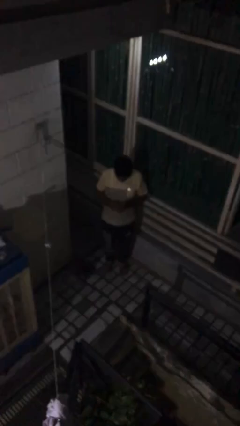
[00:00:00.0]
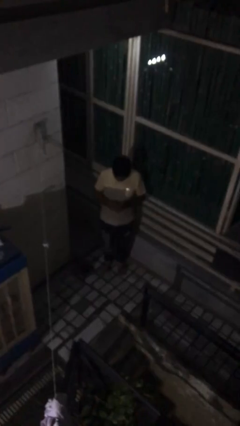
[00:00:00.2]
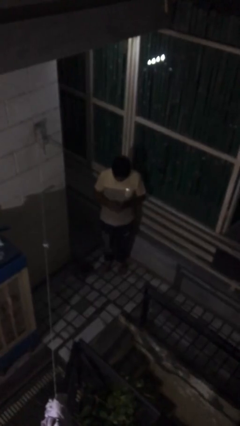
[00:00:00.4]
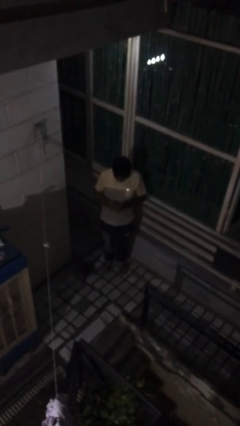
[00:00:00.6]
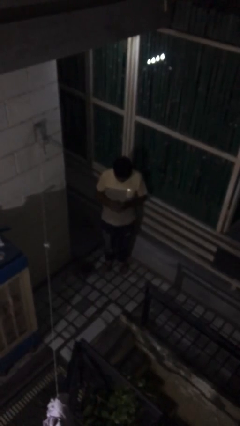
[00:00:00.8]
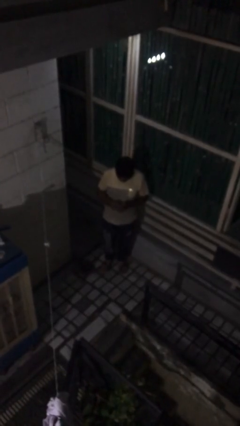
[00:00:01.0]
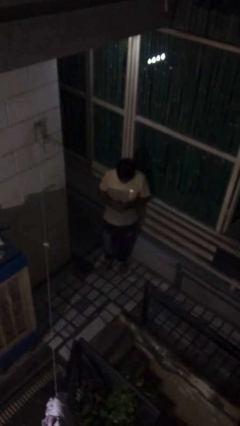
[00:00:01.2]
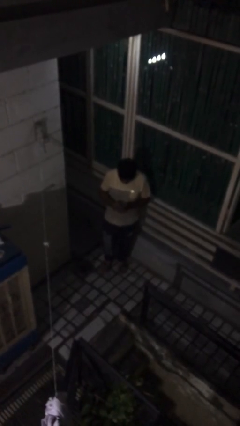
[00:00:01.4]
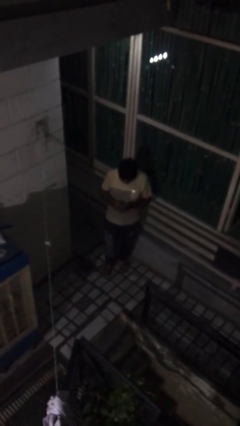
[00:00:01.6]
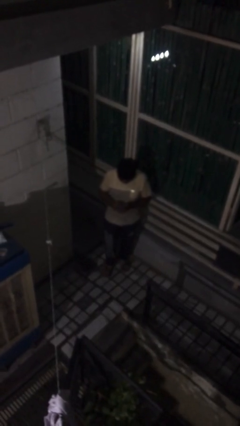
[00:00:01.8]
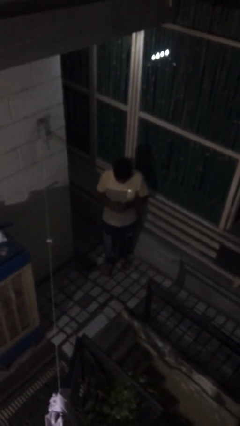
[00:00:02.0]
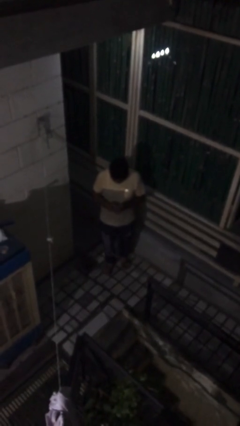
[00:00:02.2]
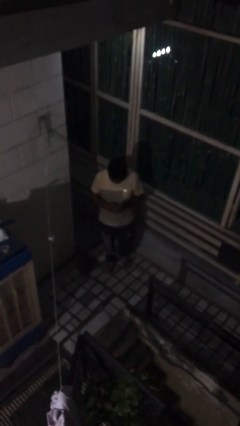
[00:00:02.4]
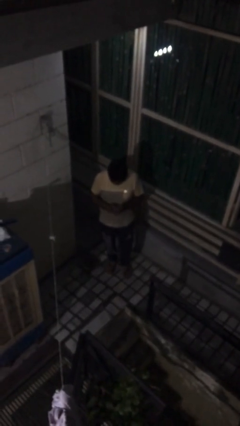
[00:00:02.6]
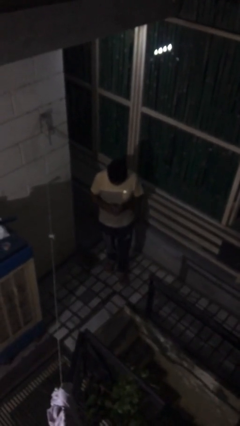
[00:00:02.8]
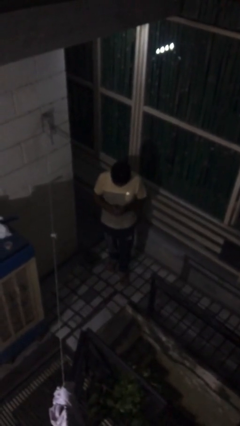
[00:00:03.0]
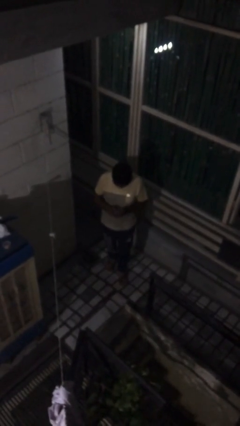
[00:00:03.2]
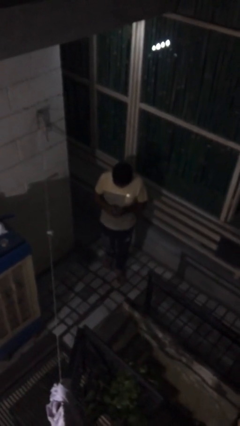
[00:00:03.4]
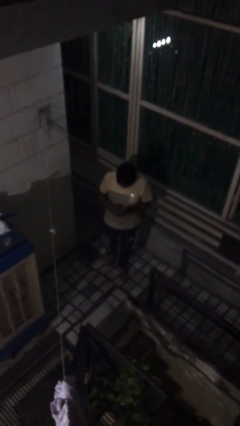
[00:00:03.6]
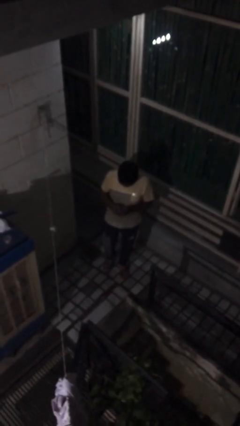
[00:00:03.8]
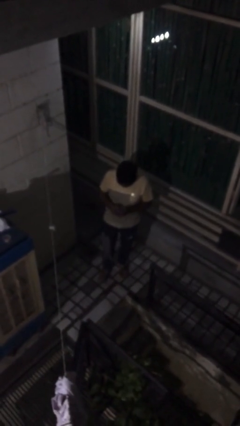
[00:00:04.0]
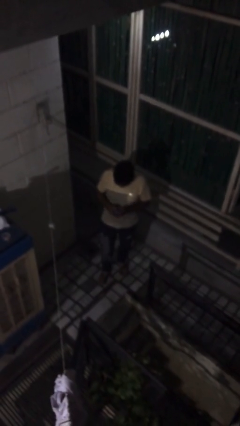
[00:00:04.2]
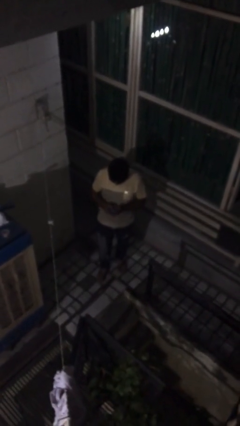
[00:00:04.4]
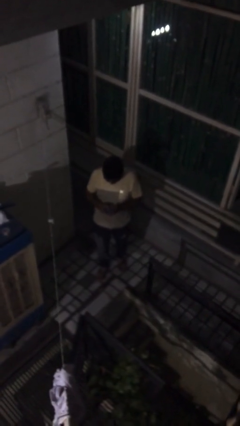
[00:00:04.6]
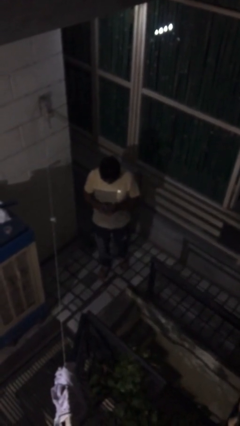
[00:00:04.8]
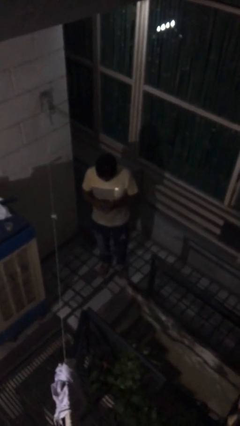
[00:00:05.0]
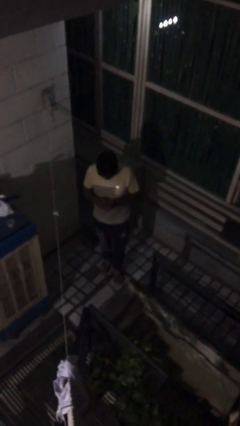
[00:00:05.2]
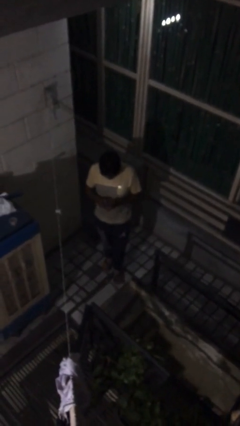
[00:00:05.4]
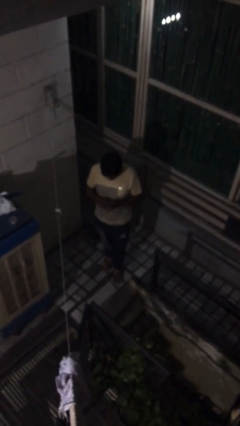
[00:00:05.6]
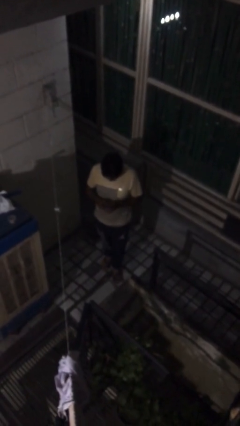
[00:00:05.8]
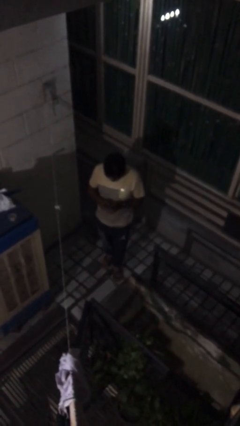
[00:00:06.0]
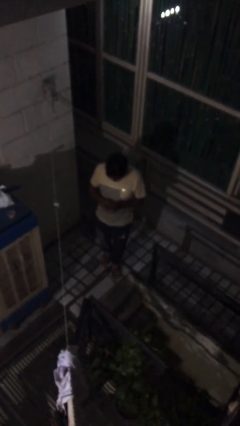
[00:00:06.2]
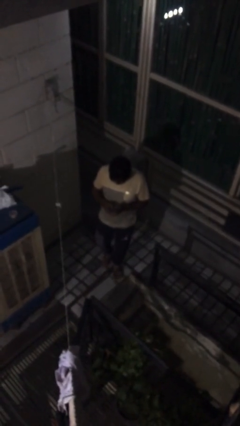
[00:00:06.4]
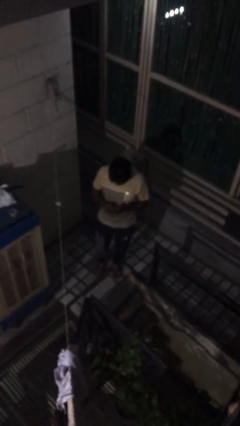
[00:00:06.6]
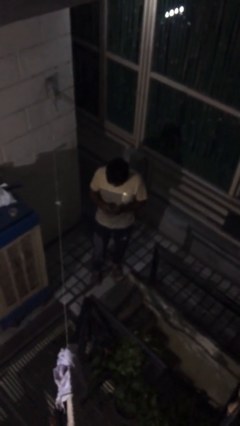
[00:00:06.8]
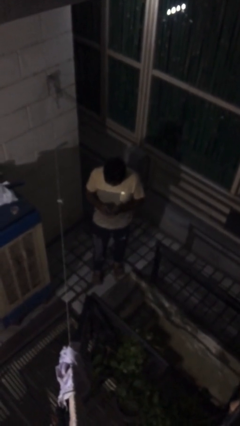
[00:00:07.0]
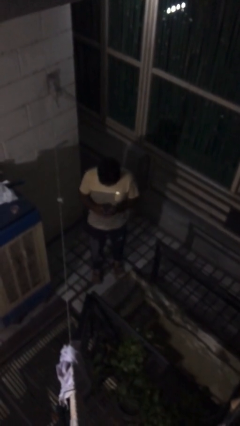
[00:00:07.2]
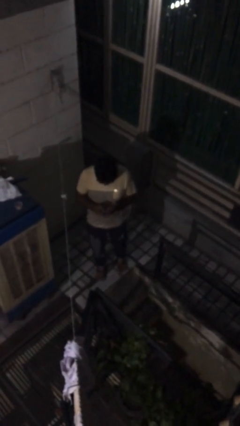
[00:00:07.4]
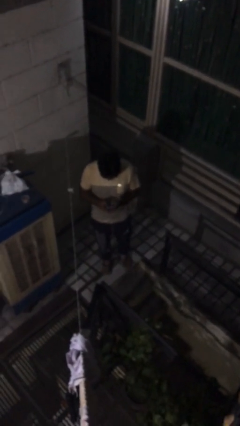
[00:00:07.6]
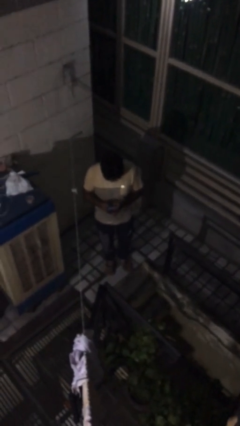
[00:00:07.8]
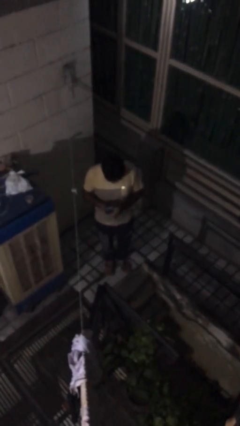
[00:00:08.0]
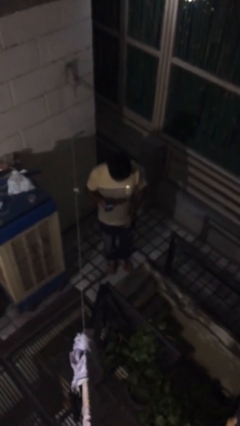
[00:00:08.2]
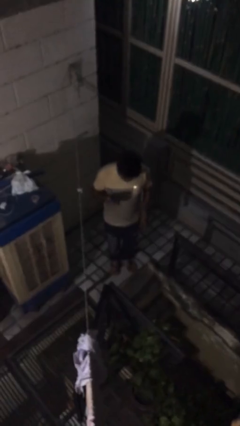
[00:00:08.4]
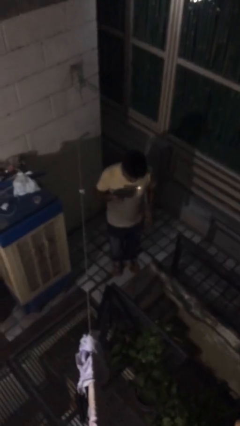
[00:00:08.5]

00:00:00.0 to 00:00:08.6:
person texts on phone

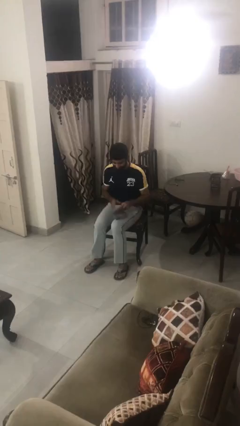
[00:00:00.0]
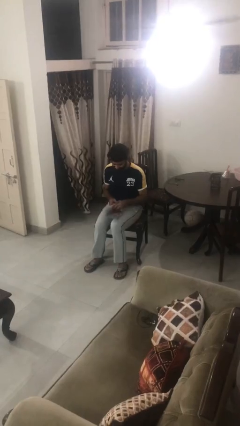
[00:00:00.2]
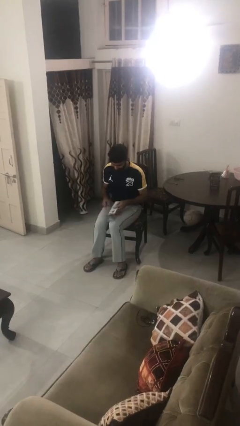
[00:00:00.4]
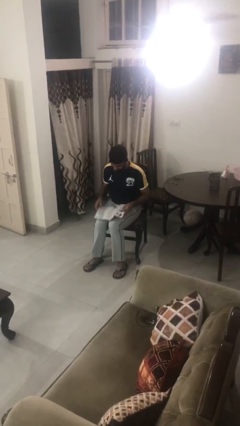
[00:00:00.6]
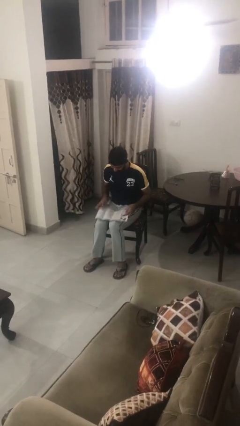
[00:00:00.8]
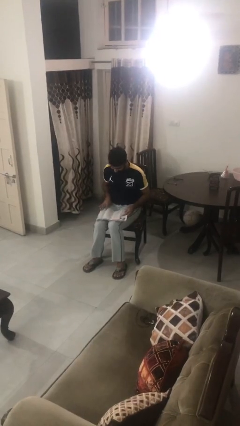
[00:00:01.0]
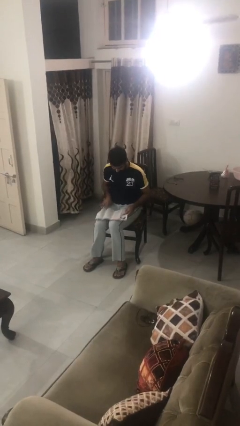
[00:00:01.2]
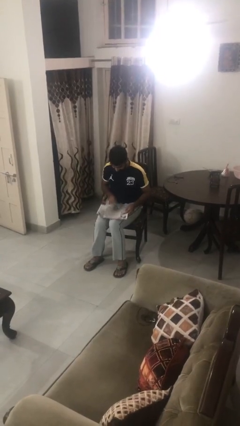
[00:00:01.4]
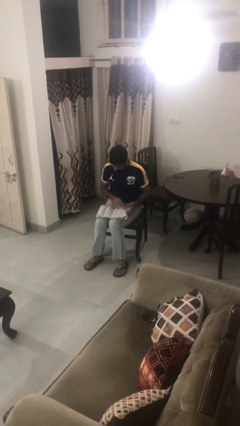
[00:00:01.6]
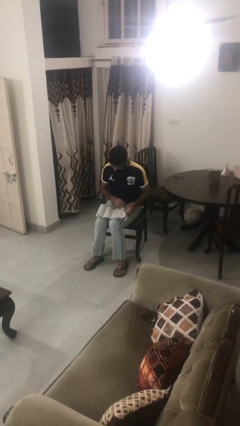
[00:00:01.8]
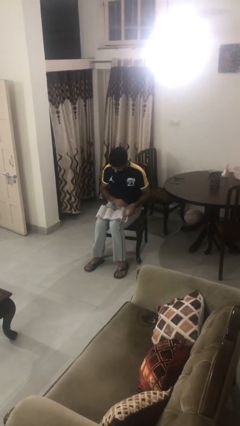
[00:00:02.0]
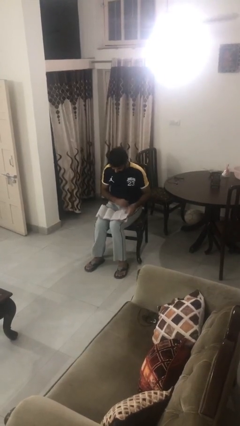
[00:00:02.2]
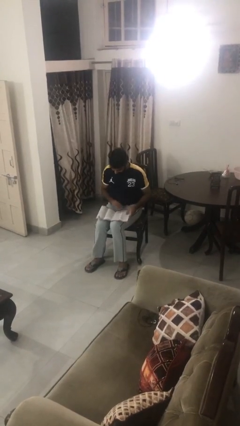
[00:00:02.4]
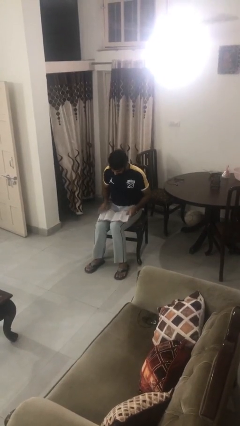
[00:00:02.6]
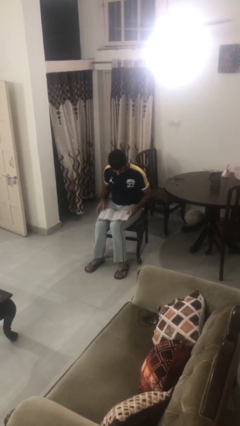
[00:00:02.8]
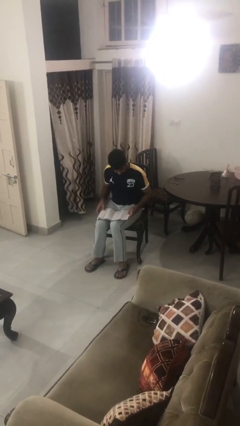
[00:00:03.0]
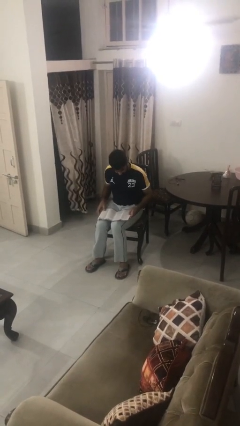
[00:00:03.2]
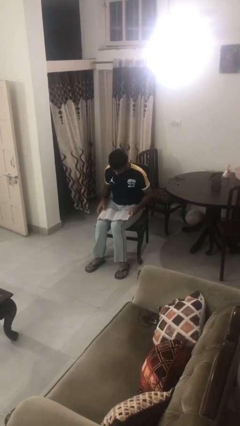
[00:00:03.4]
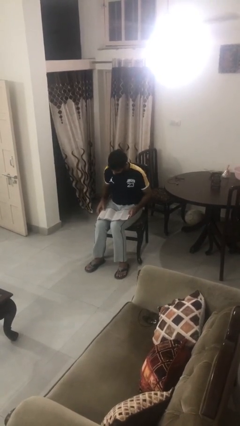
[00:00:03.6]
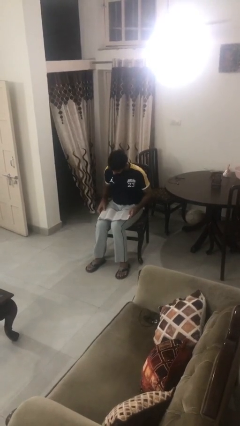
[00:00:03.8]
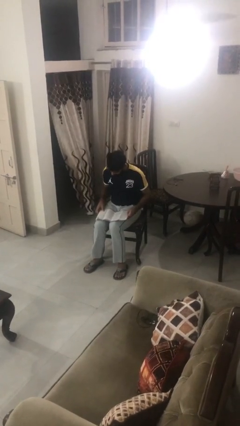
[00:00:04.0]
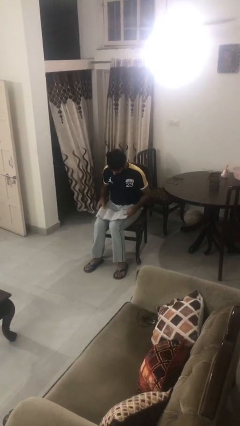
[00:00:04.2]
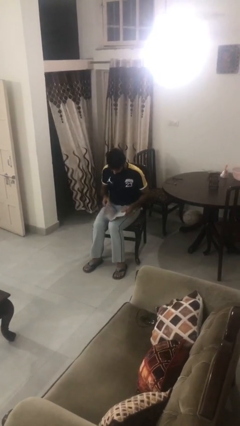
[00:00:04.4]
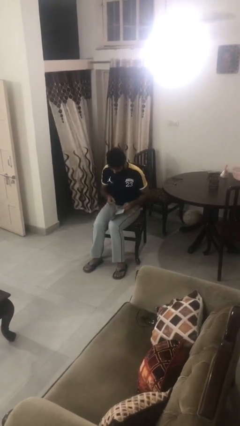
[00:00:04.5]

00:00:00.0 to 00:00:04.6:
person reads magazine

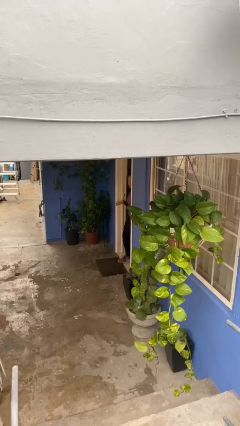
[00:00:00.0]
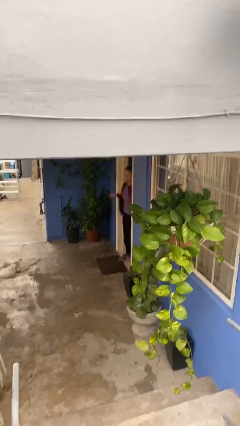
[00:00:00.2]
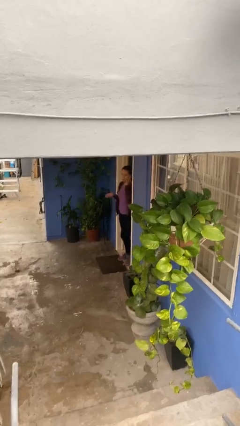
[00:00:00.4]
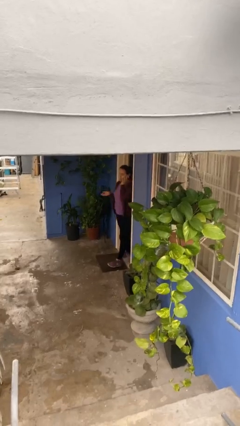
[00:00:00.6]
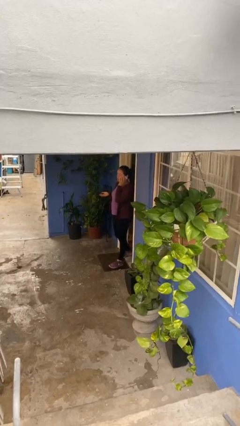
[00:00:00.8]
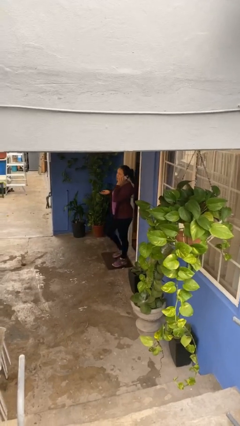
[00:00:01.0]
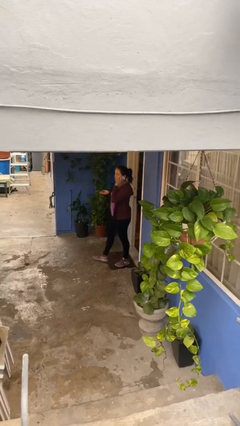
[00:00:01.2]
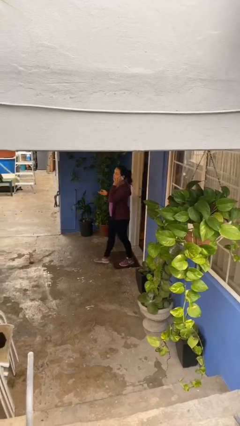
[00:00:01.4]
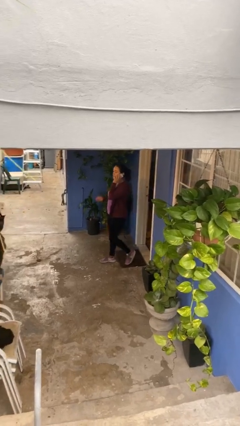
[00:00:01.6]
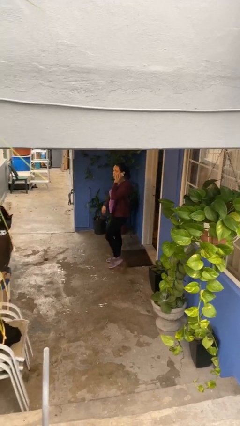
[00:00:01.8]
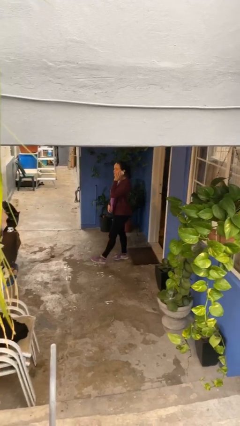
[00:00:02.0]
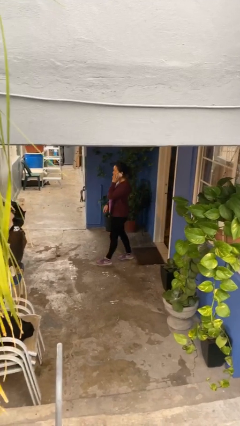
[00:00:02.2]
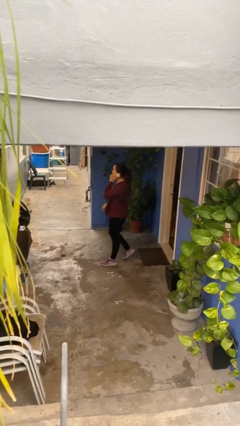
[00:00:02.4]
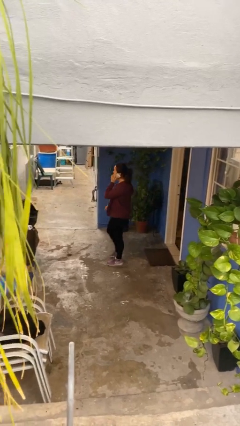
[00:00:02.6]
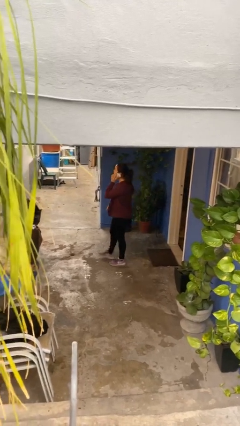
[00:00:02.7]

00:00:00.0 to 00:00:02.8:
person enters scene through structure

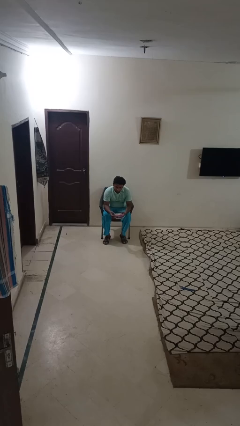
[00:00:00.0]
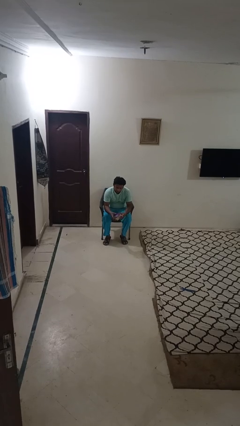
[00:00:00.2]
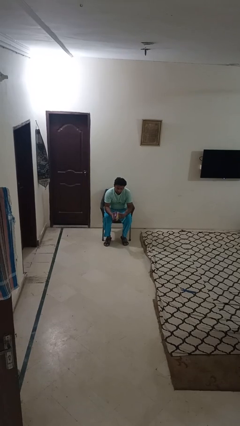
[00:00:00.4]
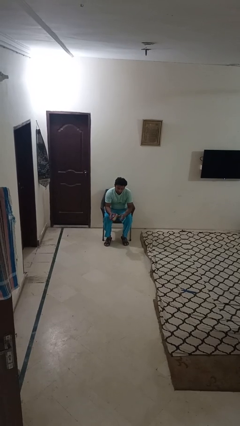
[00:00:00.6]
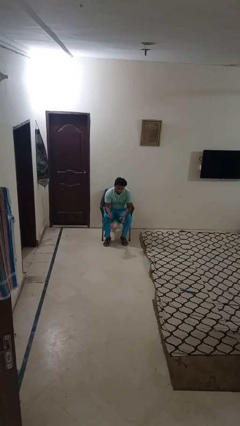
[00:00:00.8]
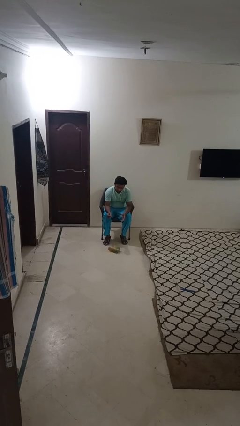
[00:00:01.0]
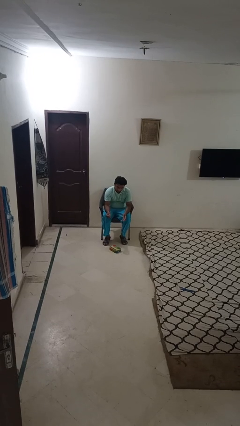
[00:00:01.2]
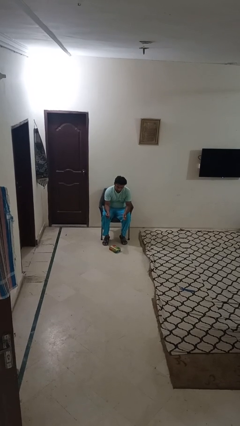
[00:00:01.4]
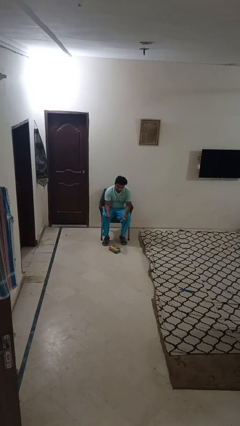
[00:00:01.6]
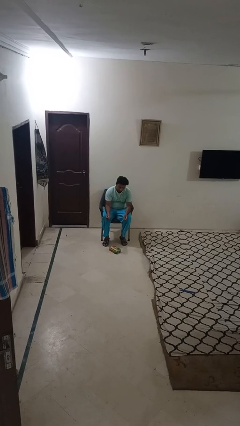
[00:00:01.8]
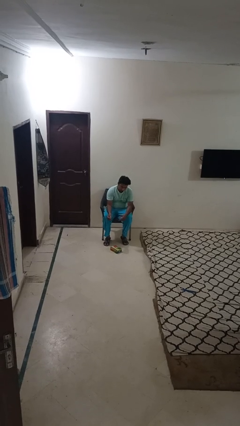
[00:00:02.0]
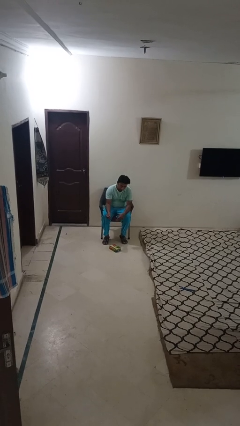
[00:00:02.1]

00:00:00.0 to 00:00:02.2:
person drops object
